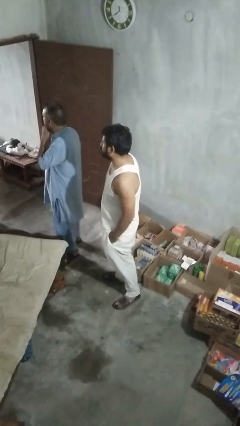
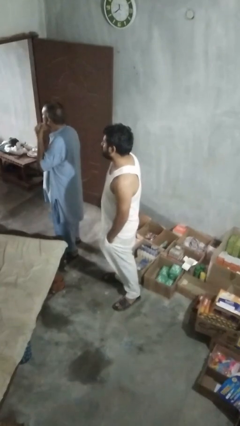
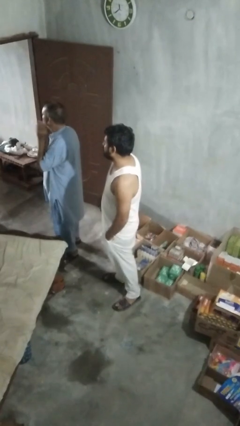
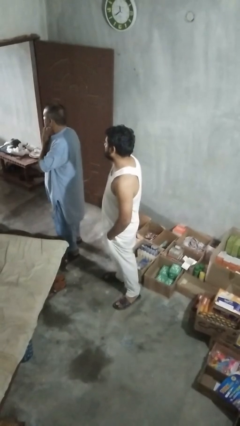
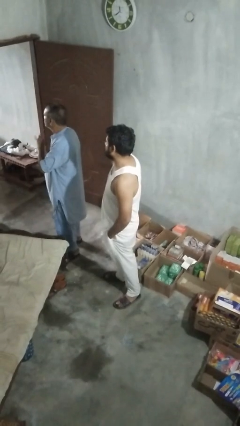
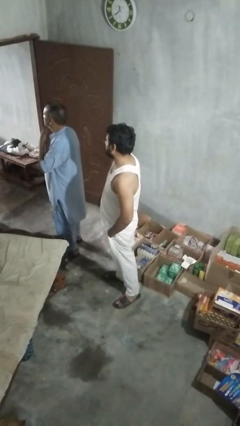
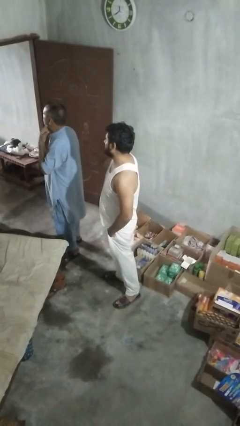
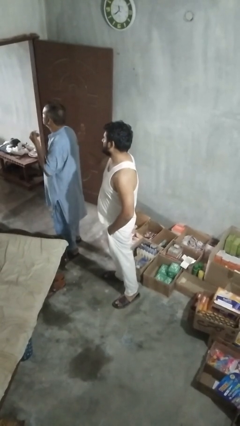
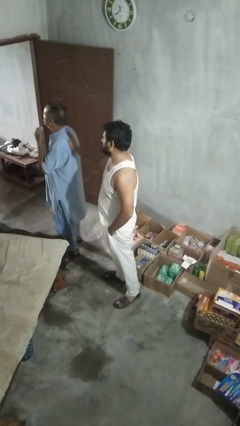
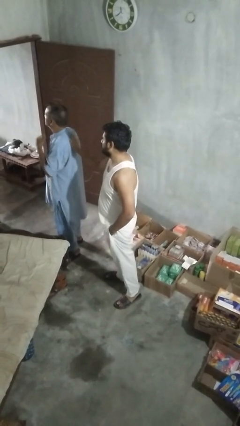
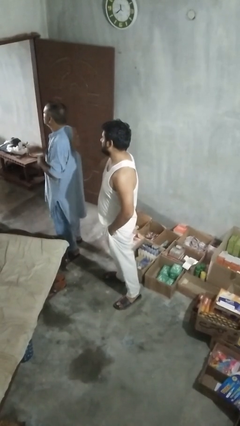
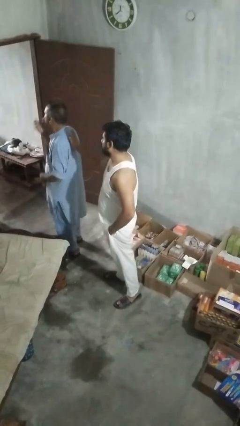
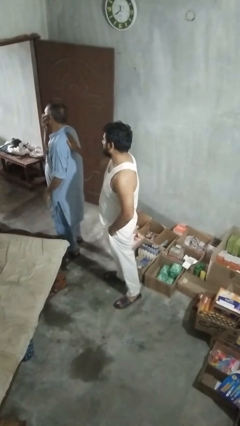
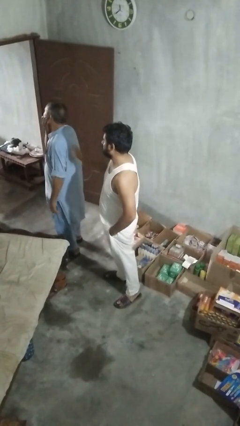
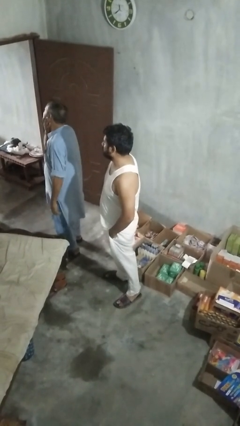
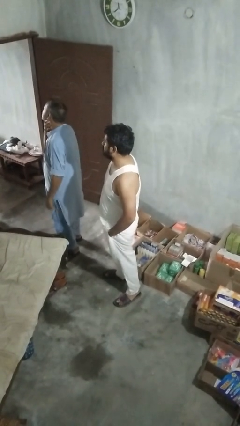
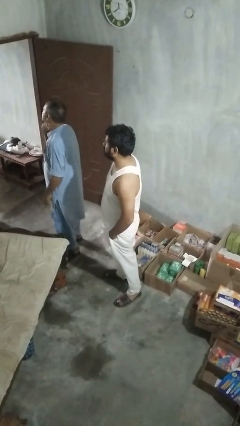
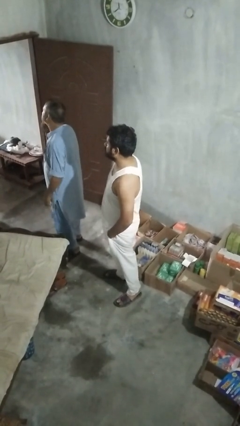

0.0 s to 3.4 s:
person touches back of person

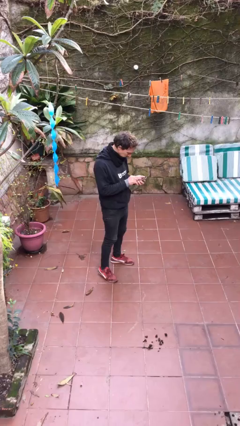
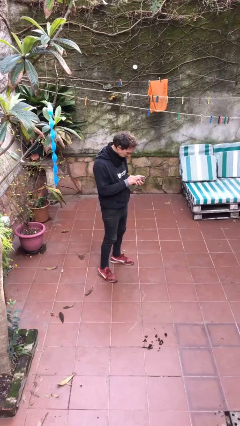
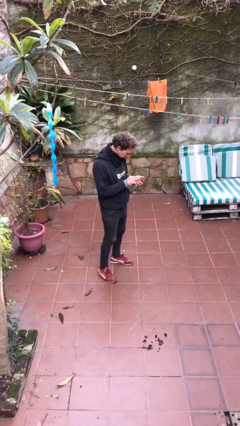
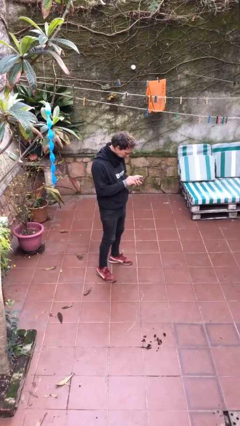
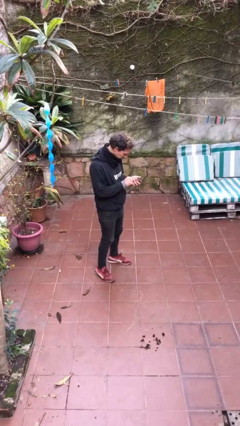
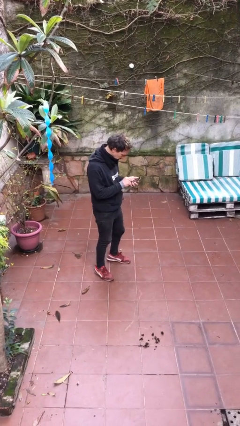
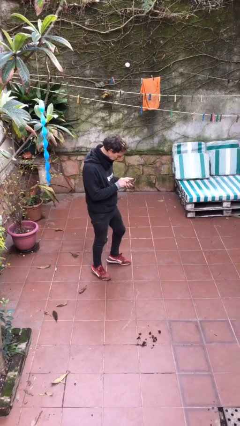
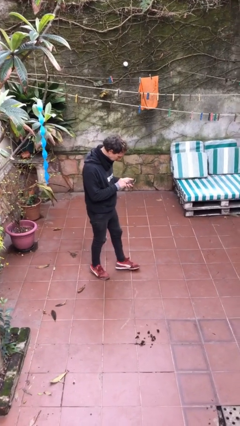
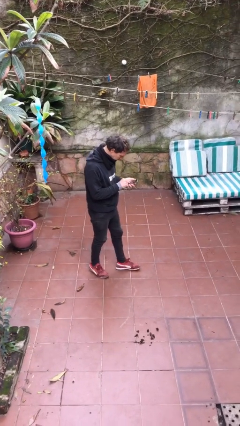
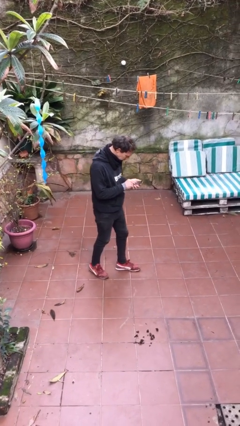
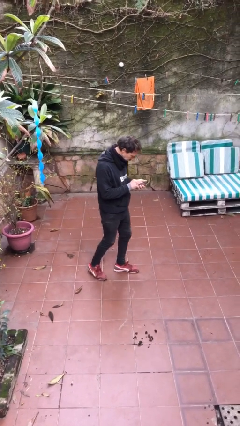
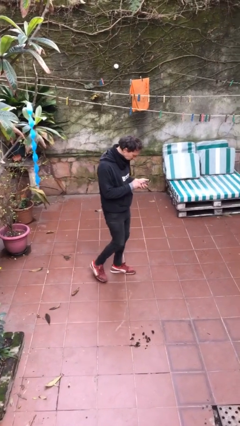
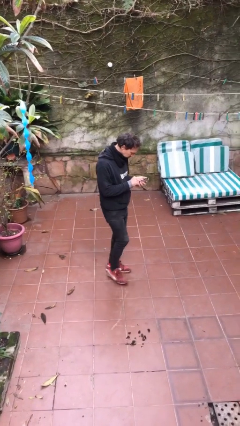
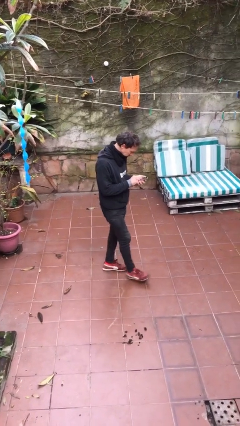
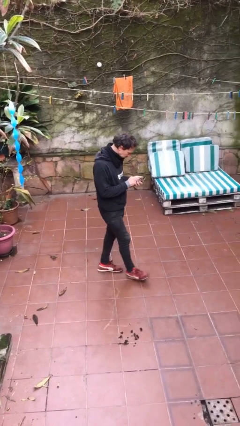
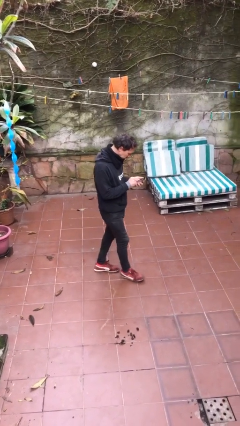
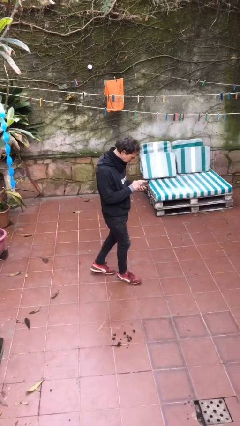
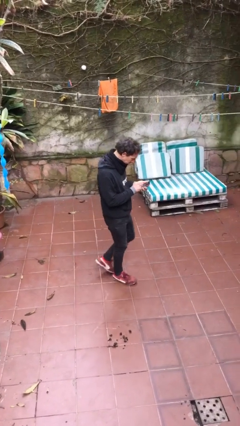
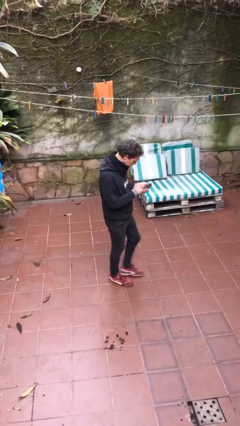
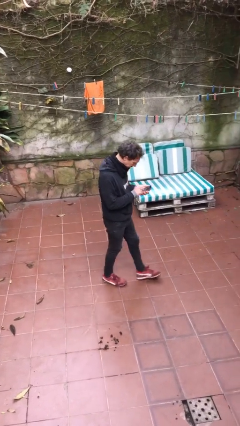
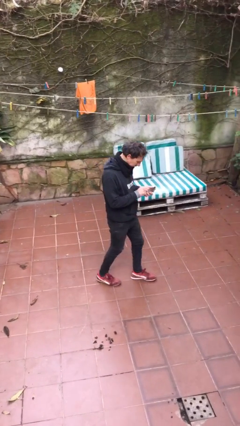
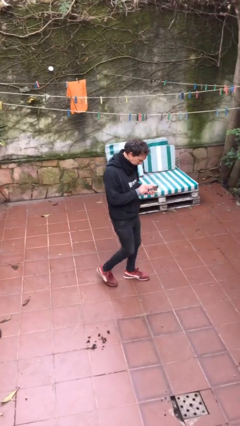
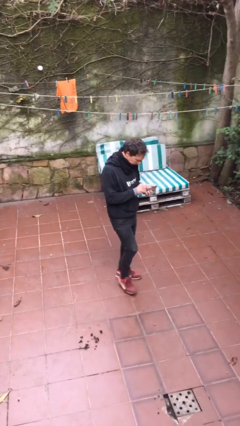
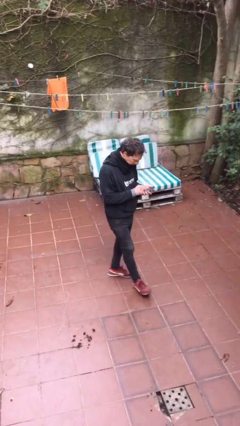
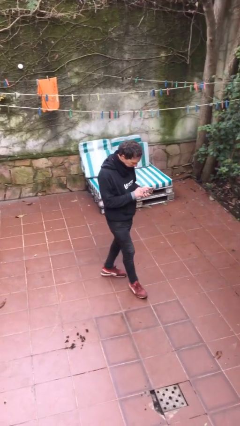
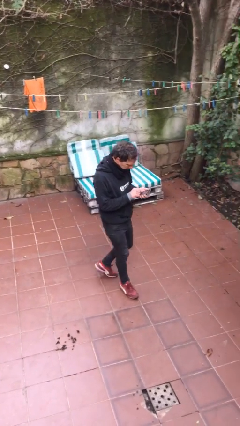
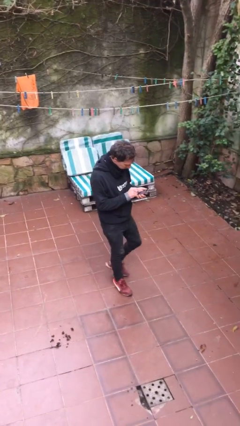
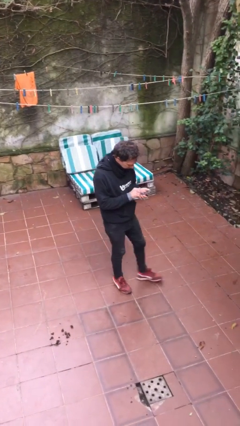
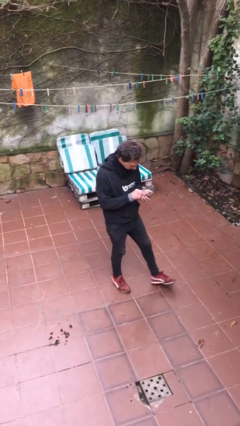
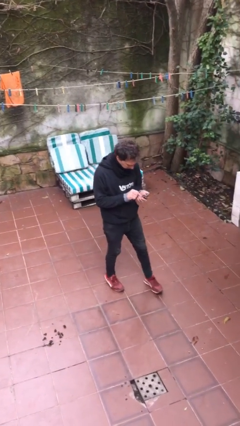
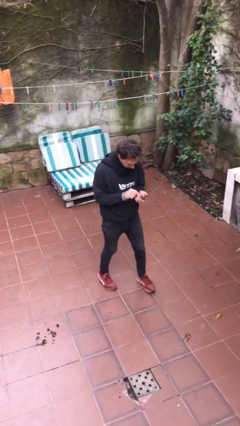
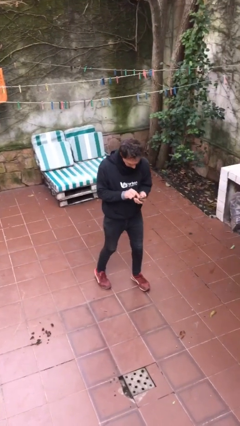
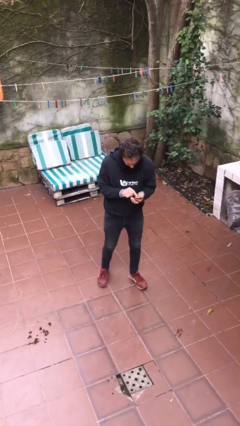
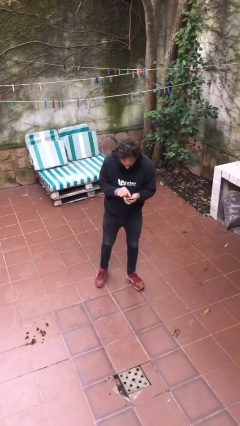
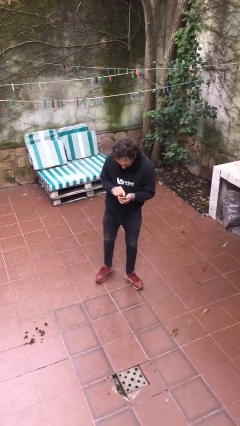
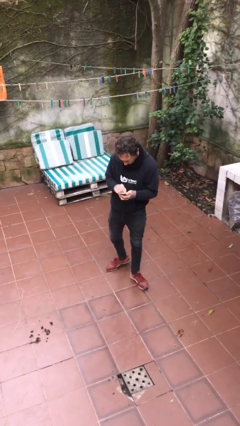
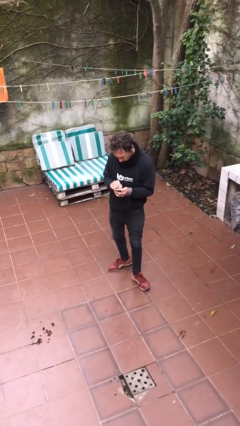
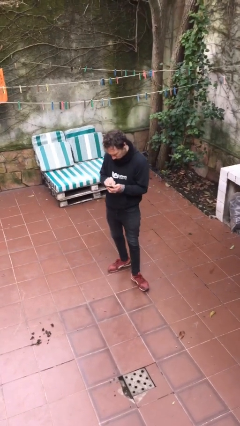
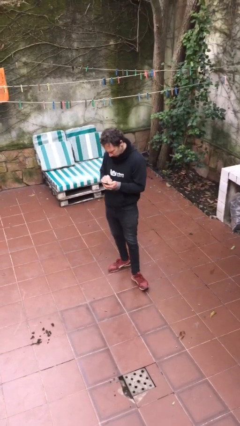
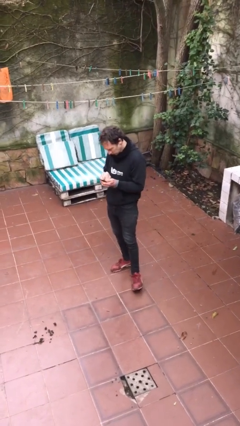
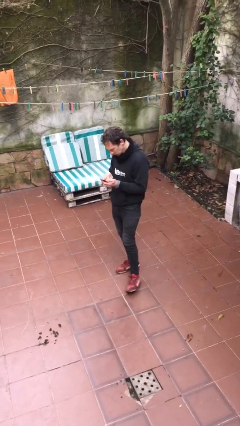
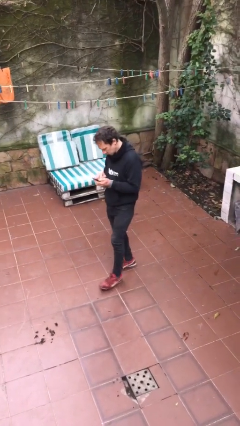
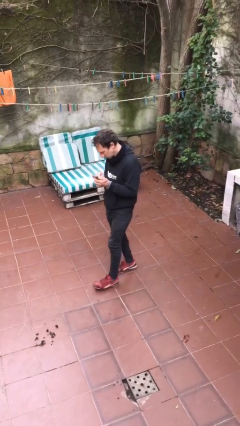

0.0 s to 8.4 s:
person texts on phone

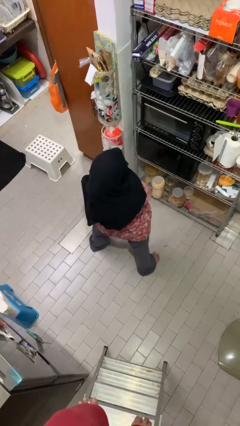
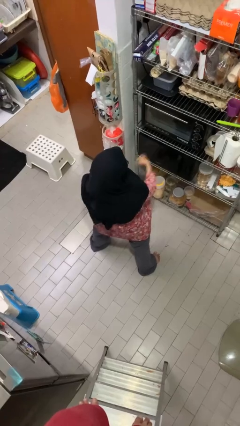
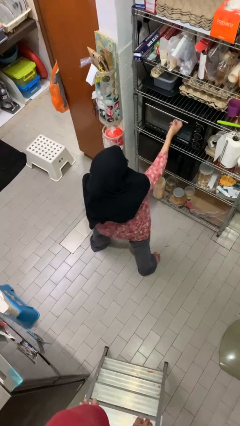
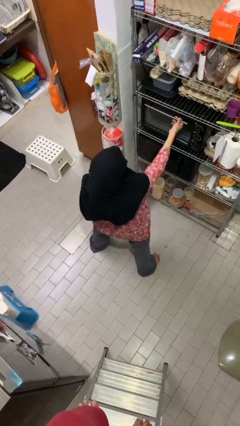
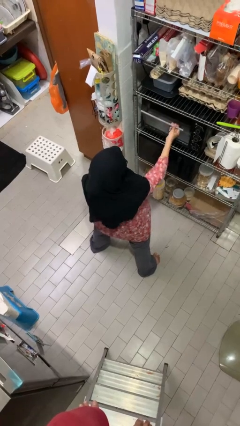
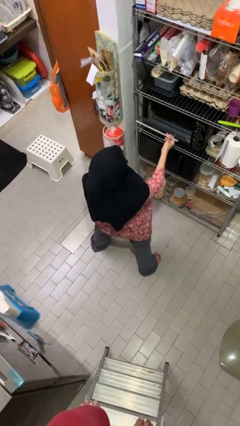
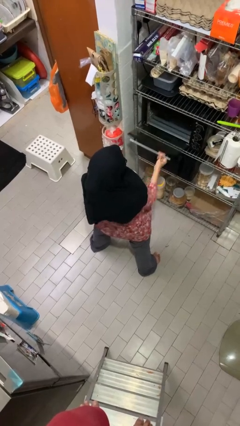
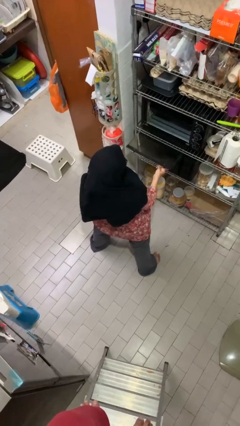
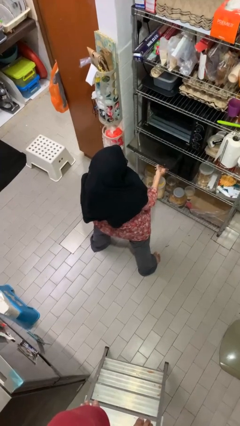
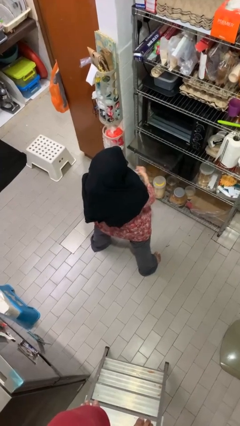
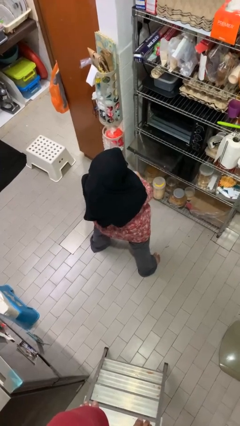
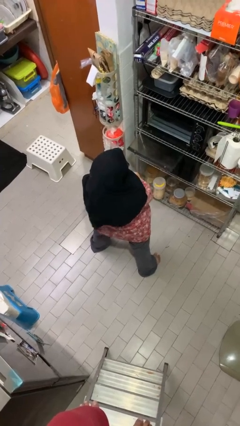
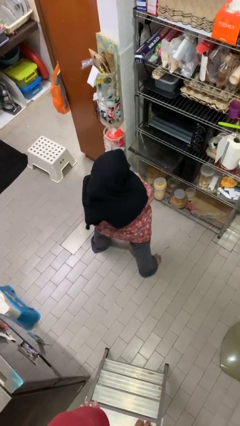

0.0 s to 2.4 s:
person opens oven door

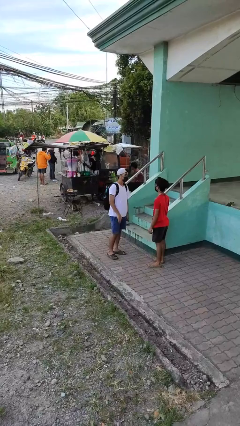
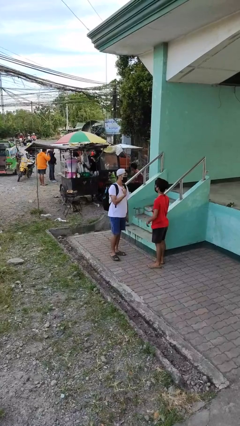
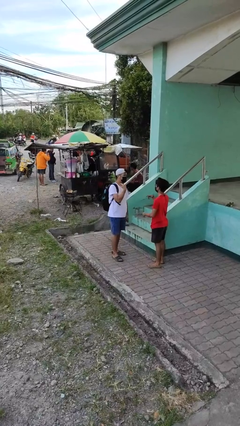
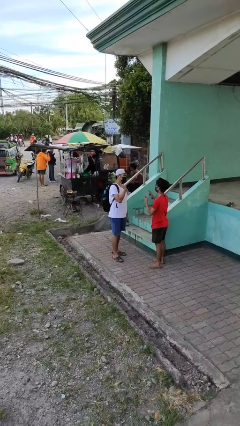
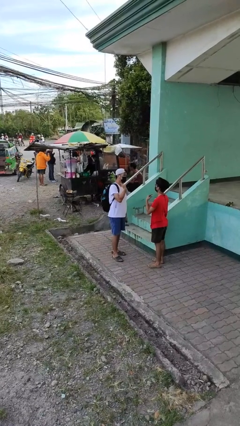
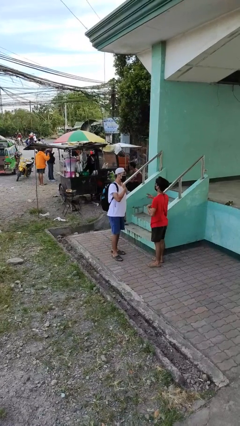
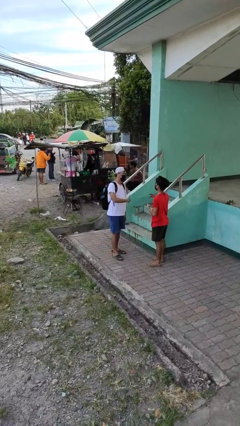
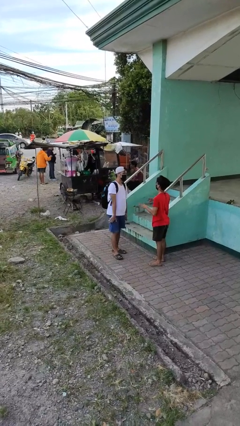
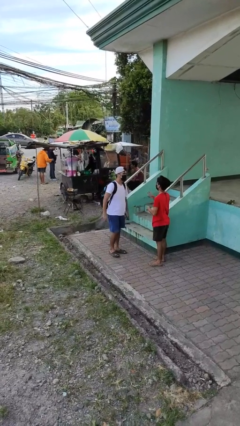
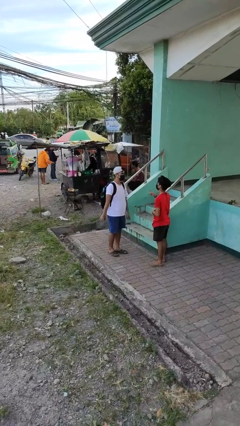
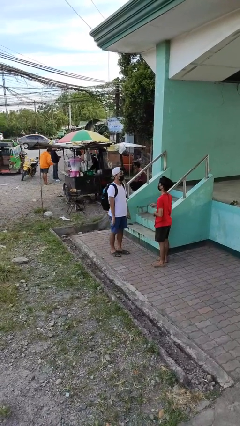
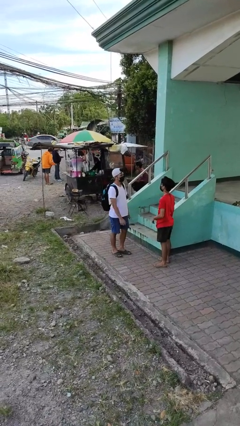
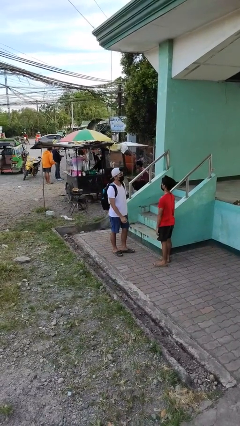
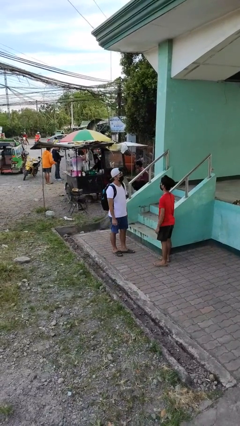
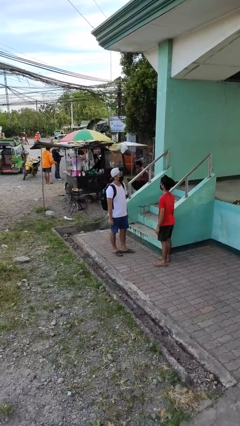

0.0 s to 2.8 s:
person talks to person

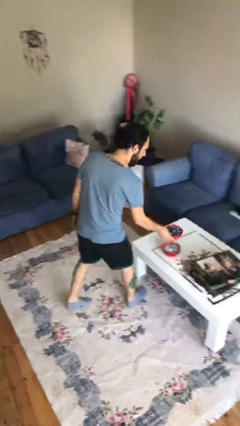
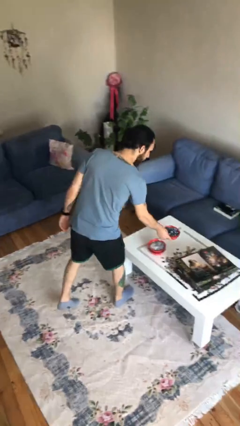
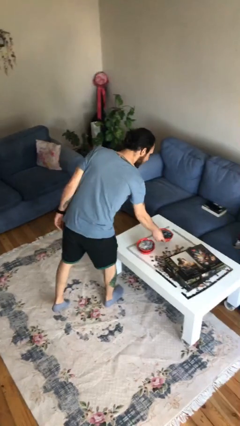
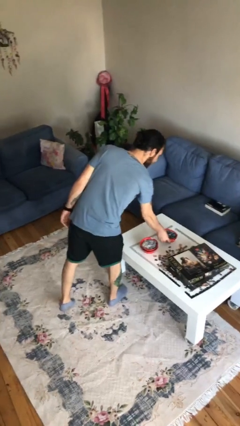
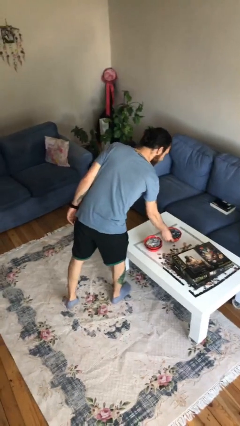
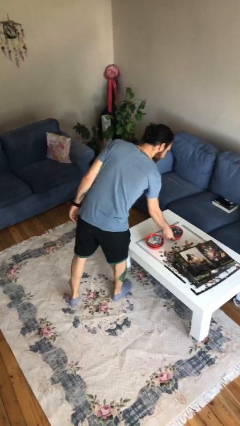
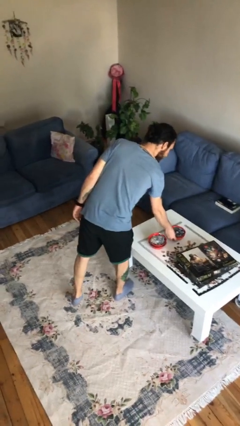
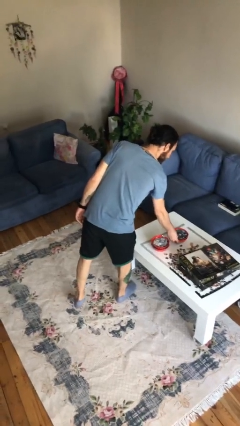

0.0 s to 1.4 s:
person puts down object on table
